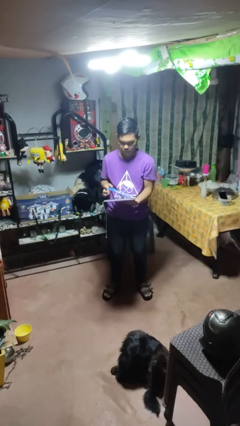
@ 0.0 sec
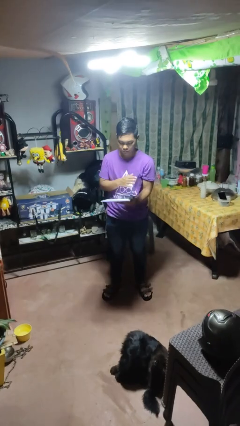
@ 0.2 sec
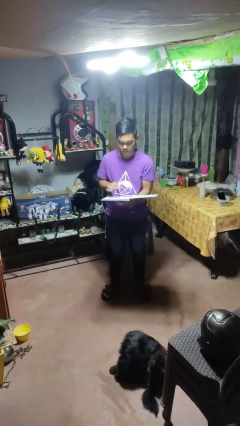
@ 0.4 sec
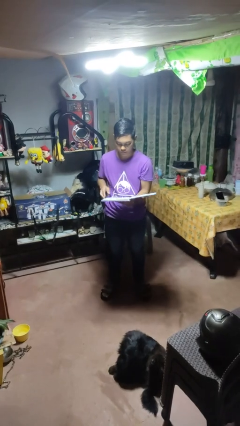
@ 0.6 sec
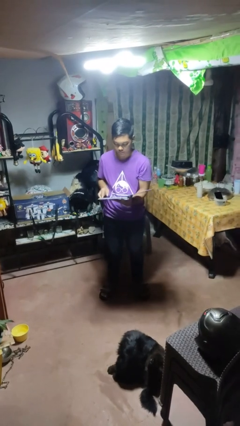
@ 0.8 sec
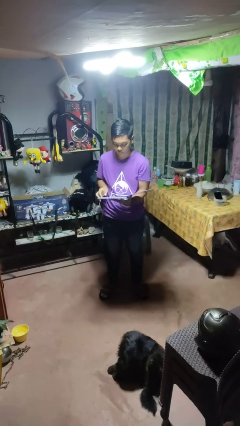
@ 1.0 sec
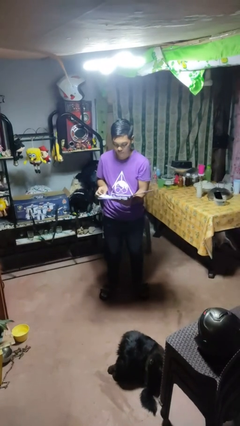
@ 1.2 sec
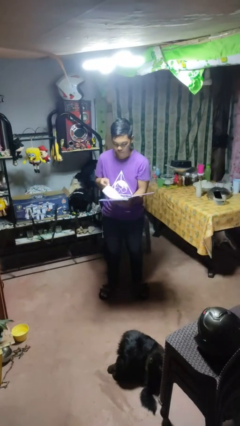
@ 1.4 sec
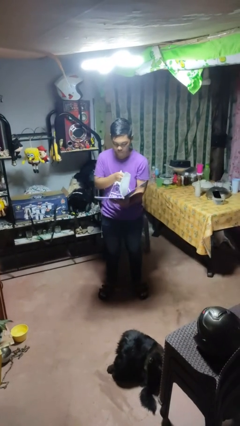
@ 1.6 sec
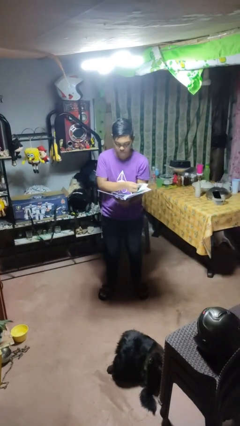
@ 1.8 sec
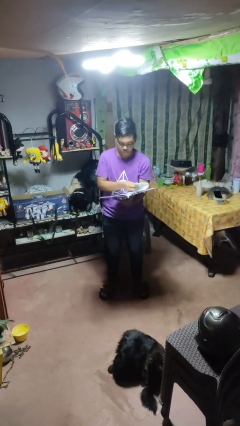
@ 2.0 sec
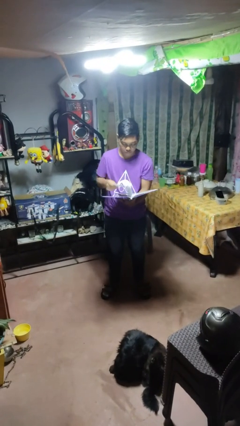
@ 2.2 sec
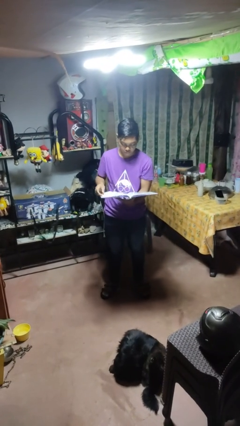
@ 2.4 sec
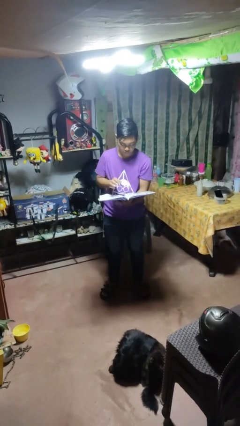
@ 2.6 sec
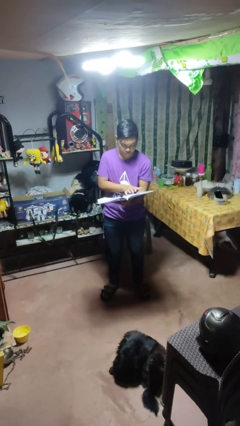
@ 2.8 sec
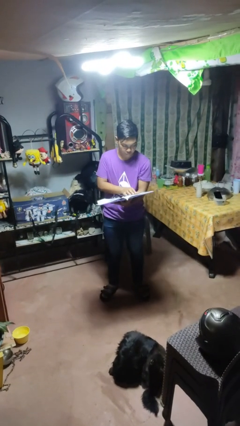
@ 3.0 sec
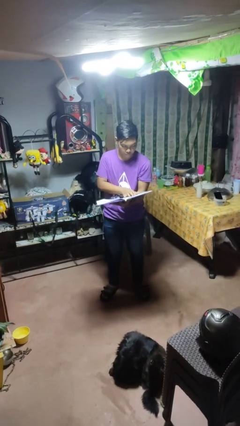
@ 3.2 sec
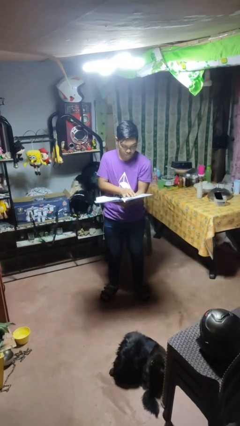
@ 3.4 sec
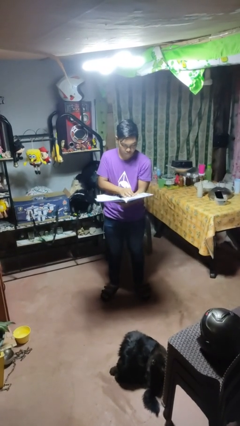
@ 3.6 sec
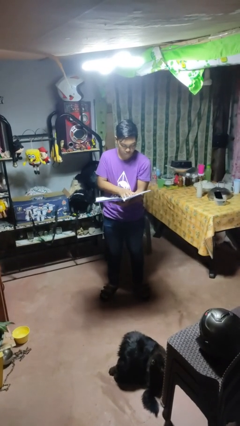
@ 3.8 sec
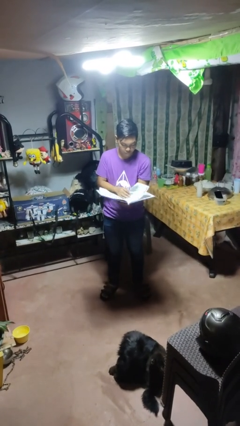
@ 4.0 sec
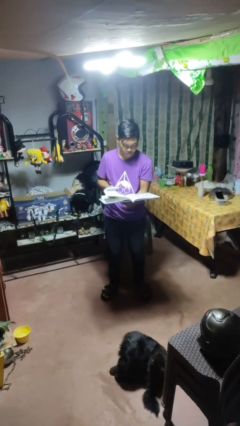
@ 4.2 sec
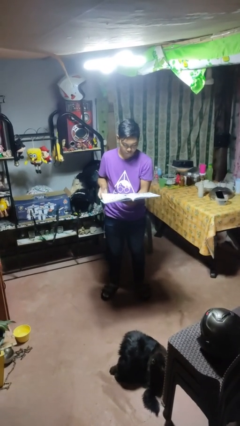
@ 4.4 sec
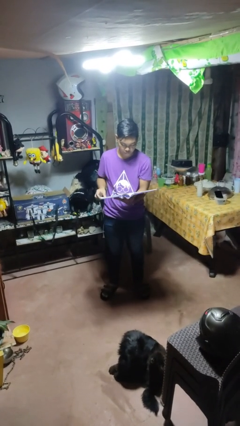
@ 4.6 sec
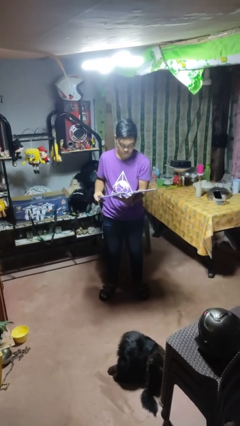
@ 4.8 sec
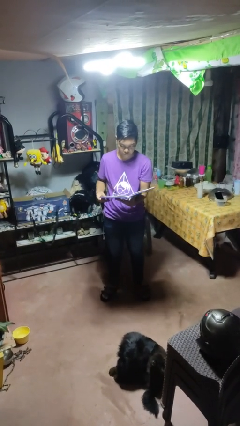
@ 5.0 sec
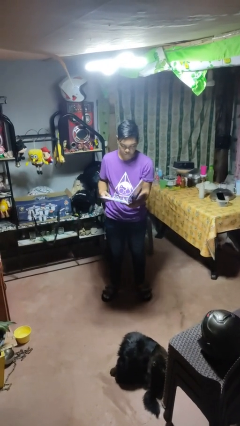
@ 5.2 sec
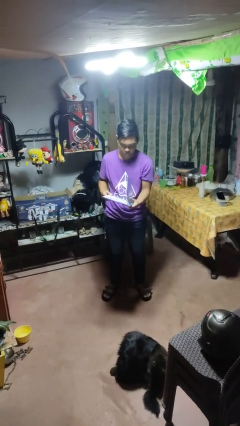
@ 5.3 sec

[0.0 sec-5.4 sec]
person reads magazine

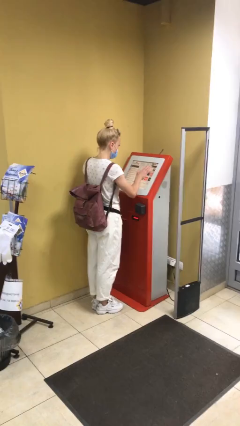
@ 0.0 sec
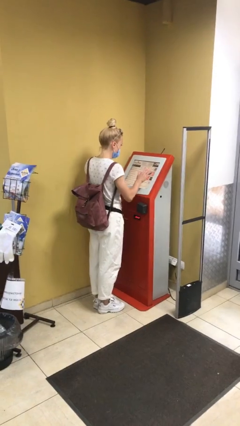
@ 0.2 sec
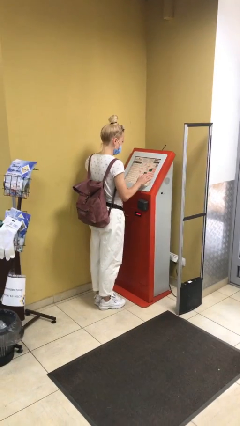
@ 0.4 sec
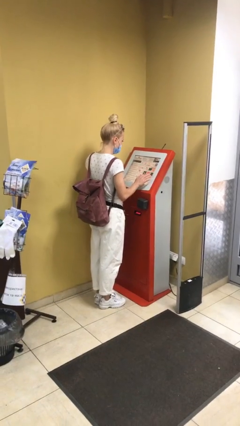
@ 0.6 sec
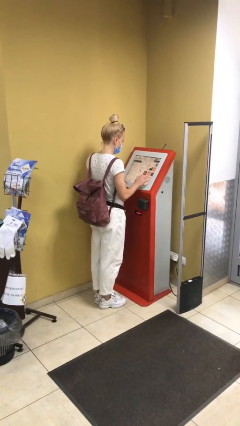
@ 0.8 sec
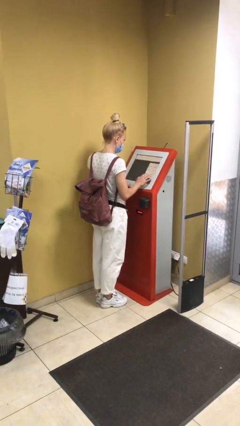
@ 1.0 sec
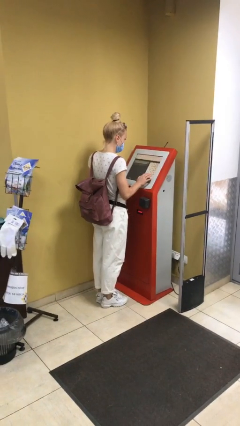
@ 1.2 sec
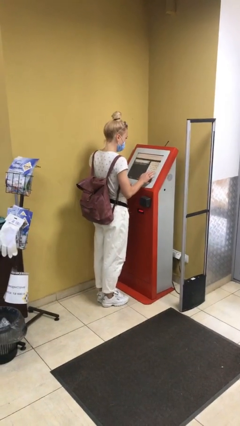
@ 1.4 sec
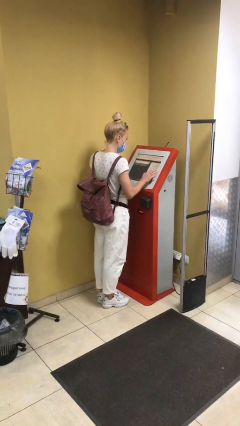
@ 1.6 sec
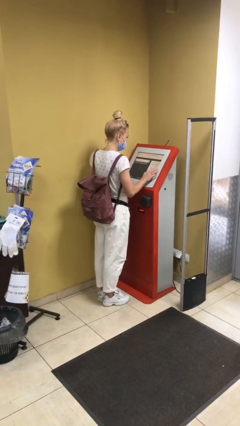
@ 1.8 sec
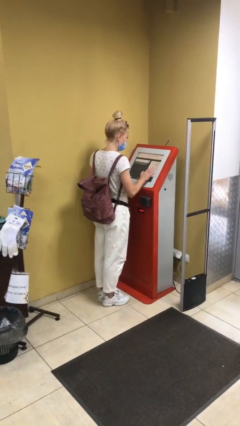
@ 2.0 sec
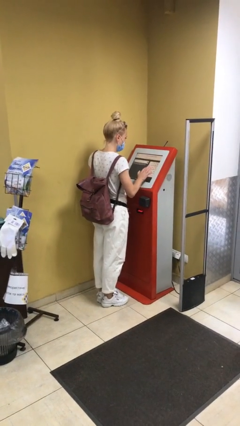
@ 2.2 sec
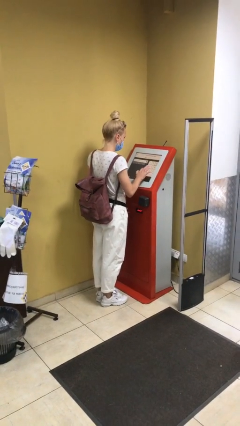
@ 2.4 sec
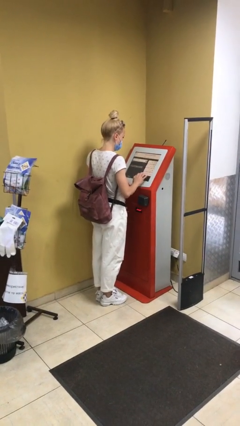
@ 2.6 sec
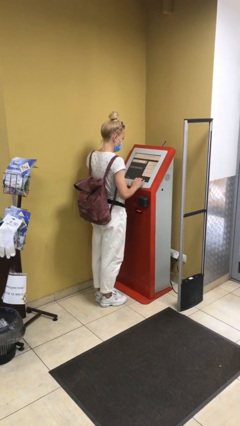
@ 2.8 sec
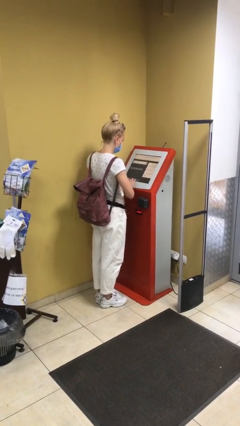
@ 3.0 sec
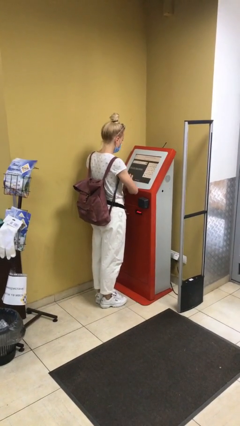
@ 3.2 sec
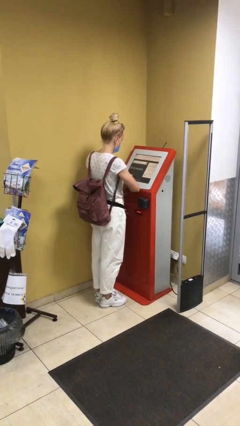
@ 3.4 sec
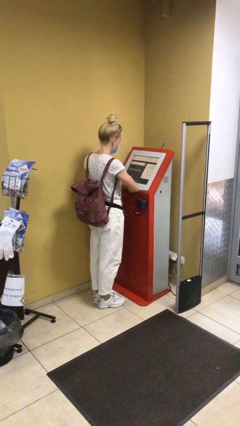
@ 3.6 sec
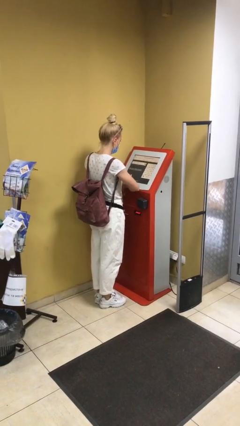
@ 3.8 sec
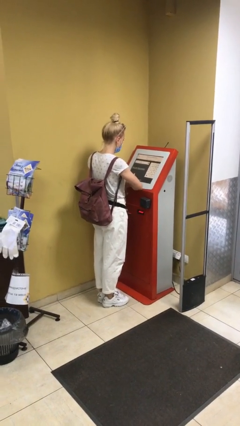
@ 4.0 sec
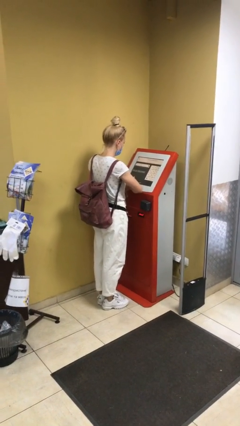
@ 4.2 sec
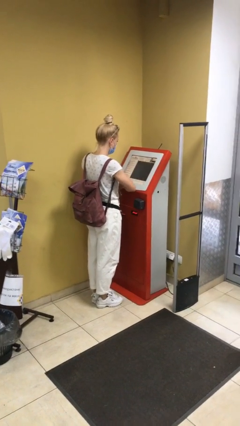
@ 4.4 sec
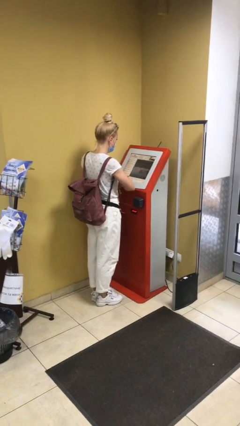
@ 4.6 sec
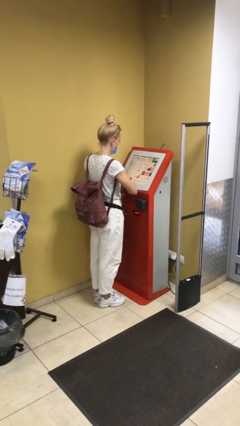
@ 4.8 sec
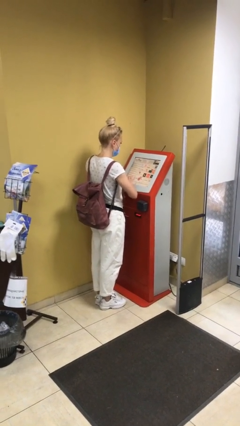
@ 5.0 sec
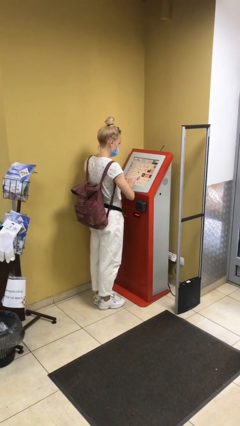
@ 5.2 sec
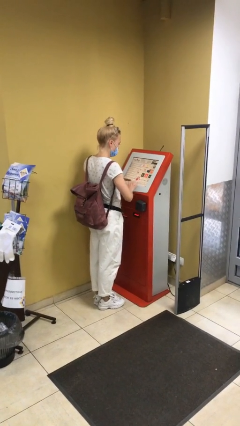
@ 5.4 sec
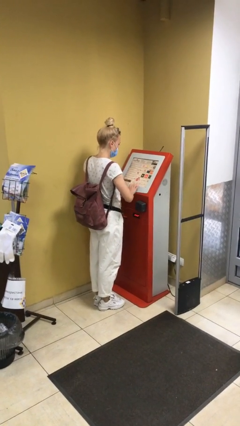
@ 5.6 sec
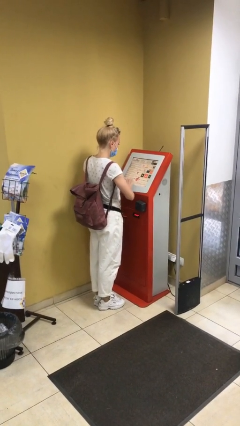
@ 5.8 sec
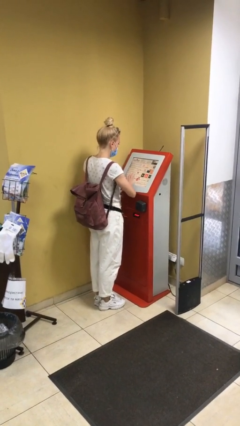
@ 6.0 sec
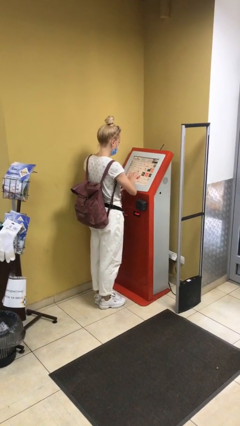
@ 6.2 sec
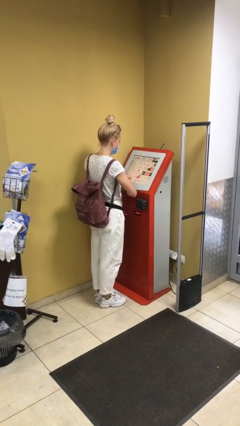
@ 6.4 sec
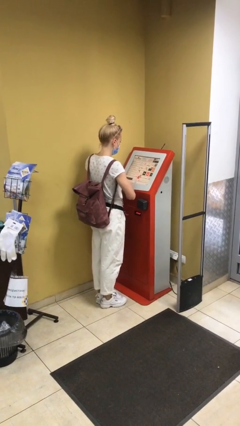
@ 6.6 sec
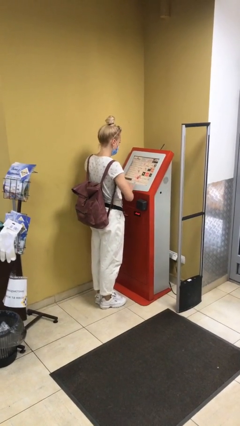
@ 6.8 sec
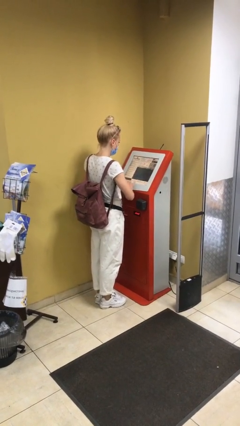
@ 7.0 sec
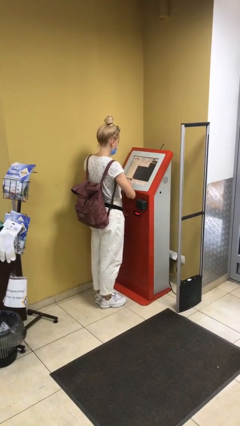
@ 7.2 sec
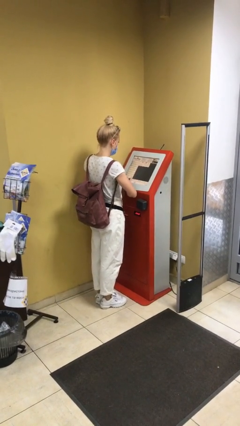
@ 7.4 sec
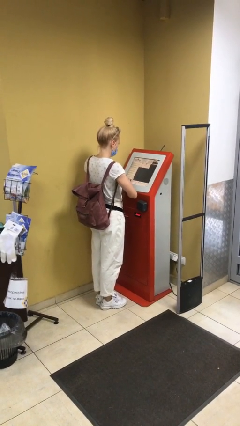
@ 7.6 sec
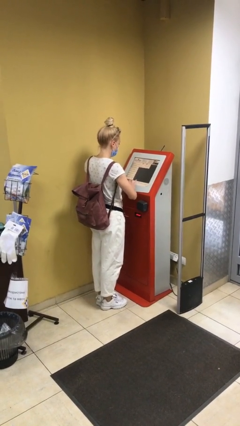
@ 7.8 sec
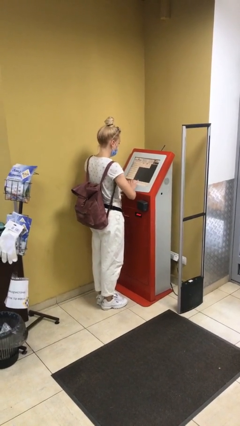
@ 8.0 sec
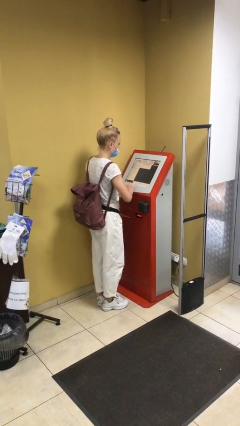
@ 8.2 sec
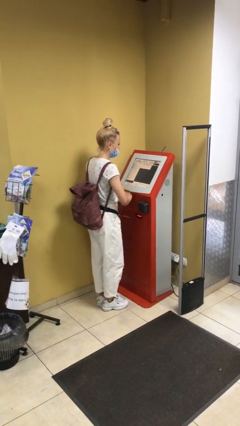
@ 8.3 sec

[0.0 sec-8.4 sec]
person purchases from machine

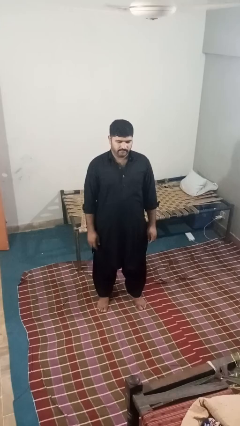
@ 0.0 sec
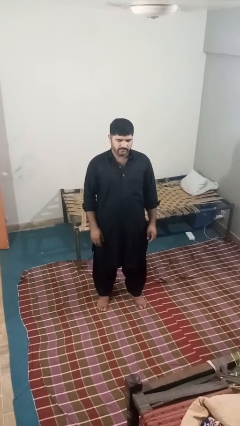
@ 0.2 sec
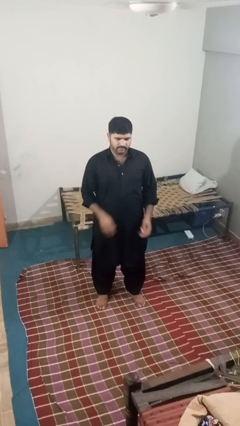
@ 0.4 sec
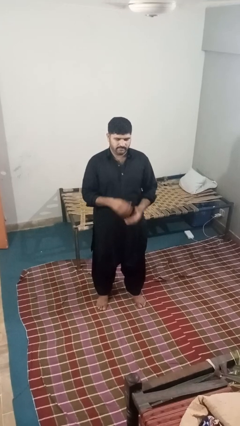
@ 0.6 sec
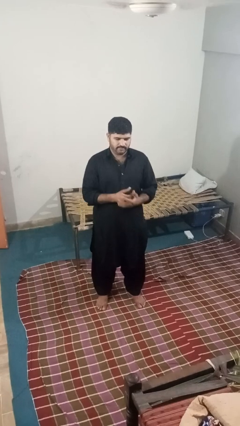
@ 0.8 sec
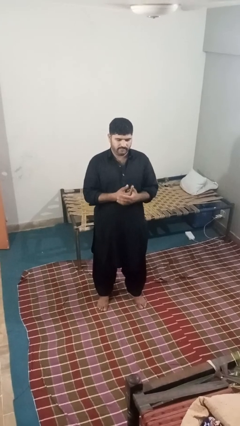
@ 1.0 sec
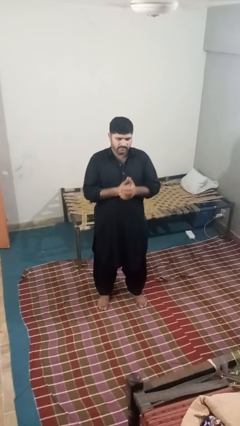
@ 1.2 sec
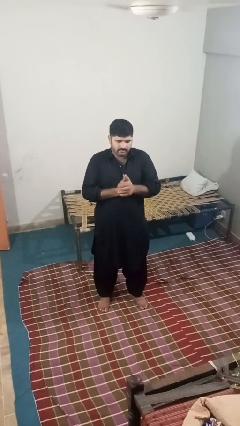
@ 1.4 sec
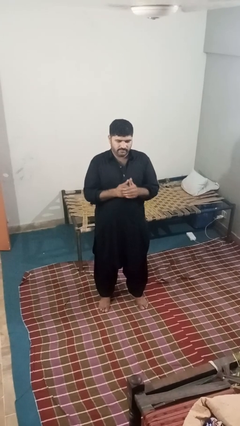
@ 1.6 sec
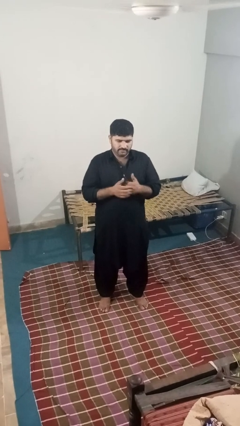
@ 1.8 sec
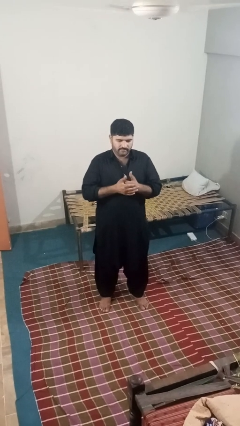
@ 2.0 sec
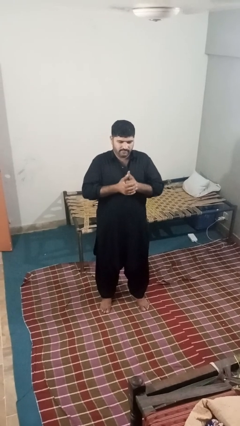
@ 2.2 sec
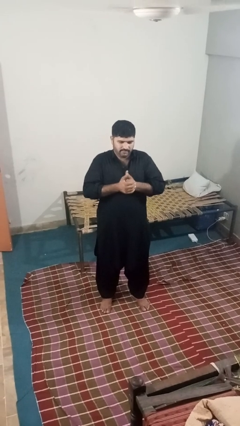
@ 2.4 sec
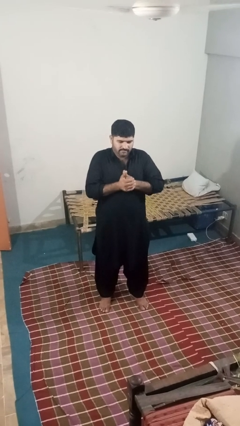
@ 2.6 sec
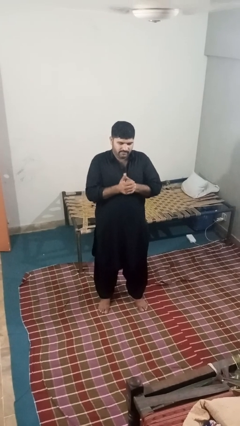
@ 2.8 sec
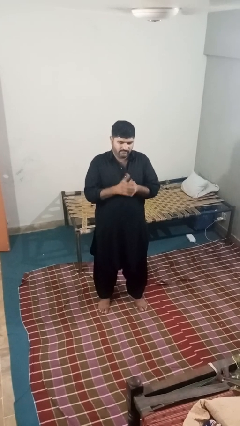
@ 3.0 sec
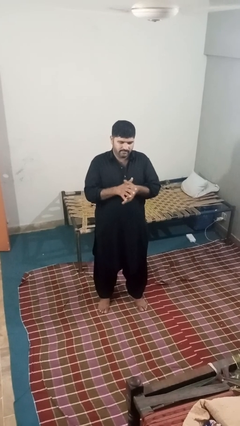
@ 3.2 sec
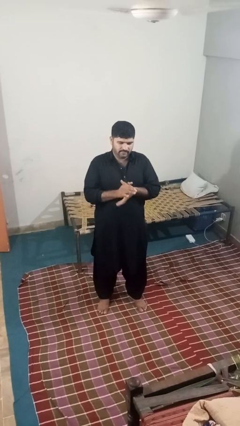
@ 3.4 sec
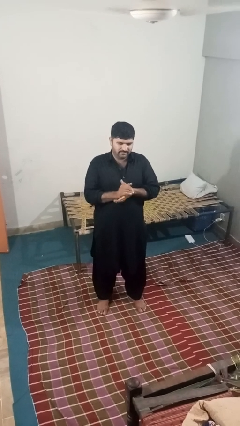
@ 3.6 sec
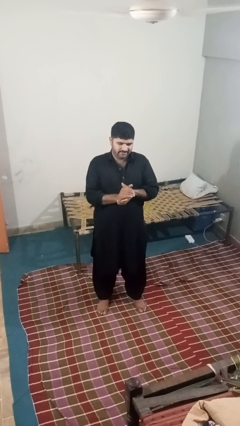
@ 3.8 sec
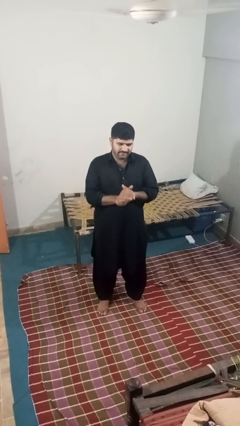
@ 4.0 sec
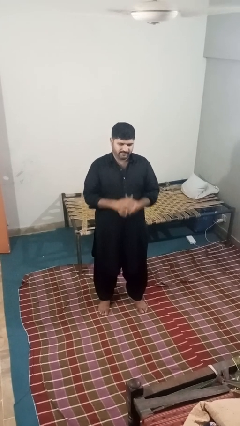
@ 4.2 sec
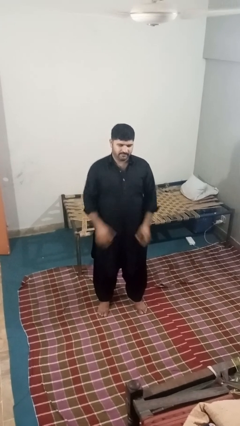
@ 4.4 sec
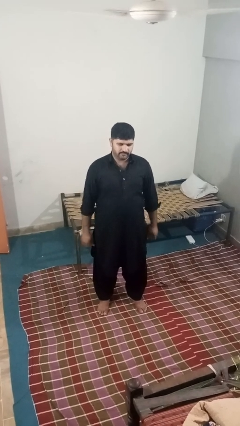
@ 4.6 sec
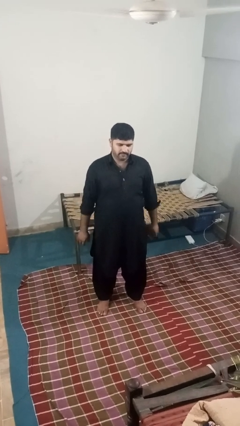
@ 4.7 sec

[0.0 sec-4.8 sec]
person cracks knuckles
